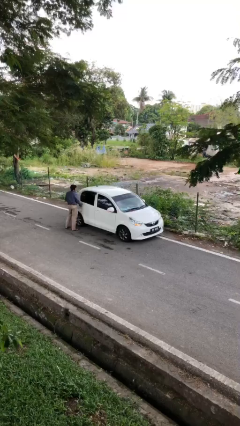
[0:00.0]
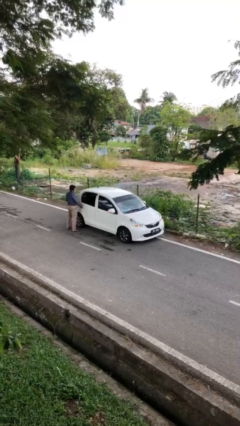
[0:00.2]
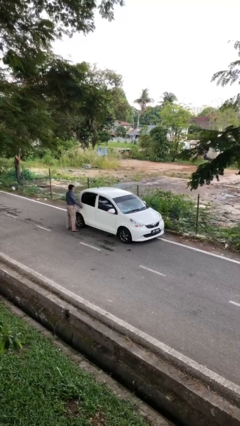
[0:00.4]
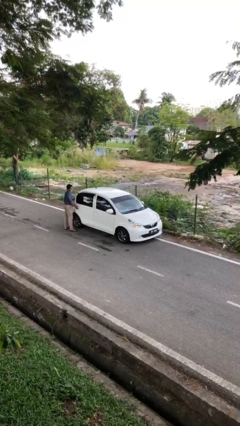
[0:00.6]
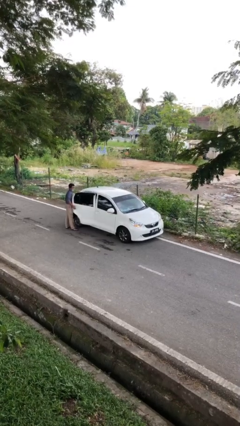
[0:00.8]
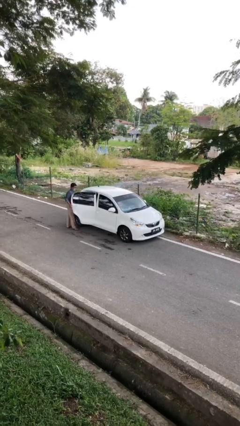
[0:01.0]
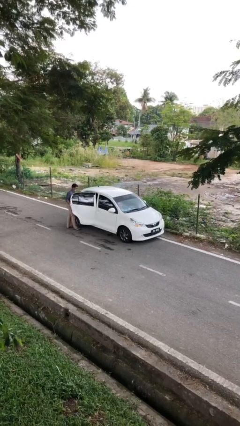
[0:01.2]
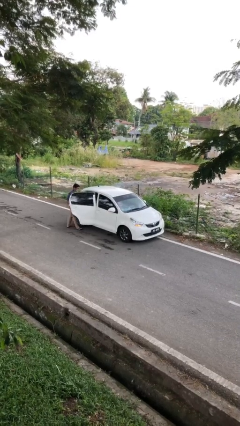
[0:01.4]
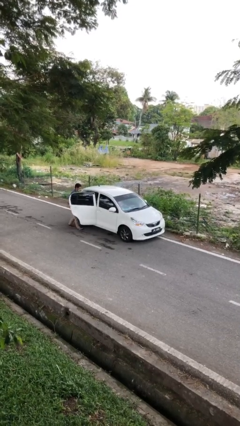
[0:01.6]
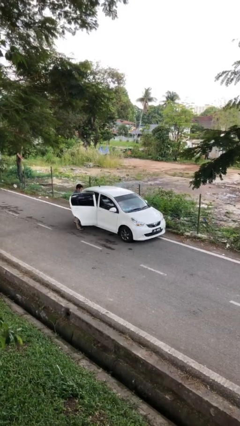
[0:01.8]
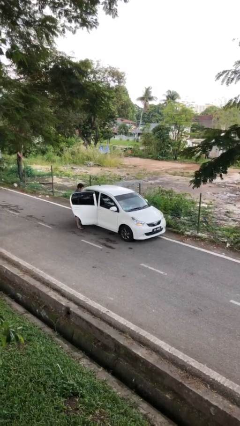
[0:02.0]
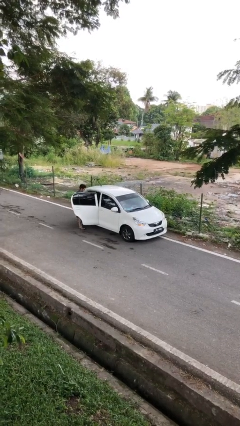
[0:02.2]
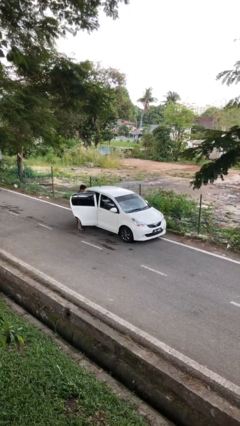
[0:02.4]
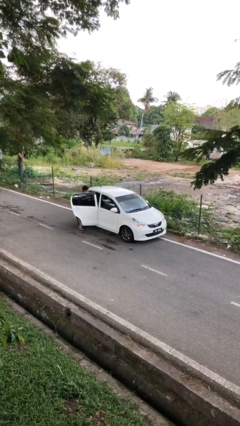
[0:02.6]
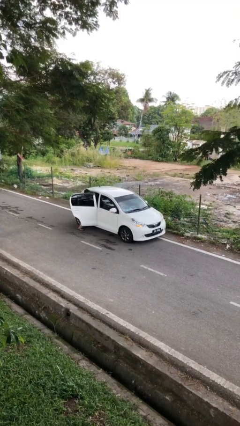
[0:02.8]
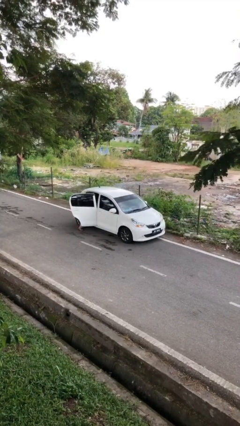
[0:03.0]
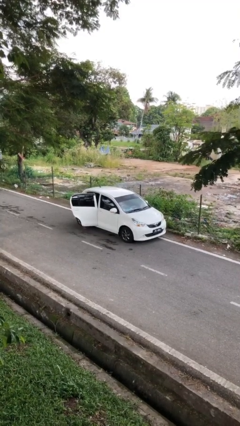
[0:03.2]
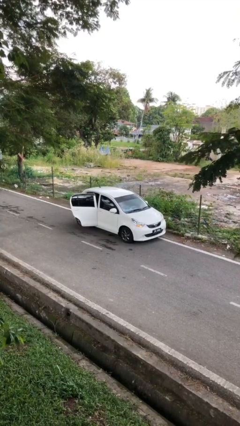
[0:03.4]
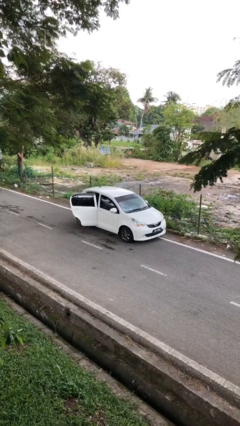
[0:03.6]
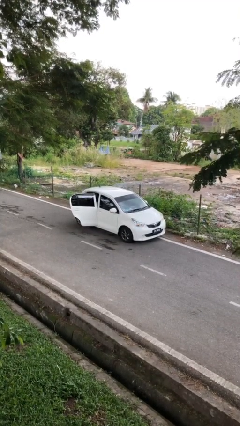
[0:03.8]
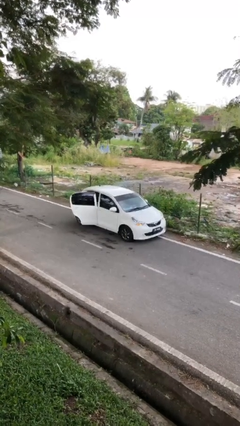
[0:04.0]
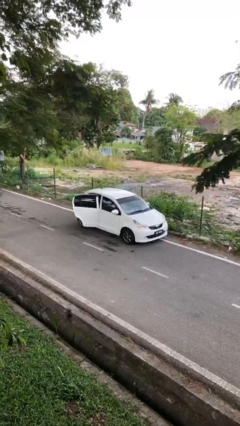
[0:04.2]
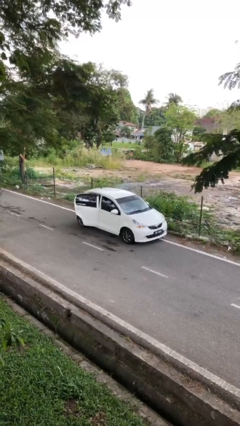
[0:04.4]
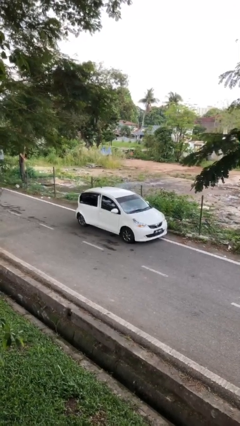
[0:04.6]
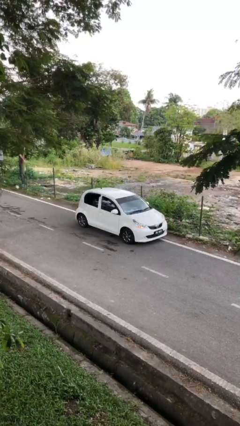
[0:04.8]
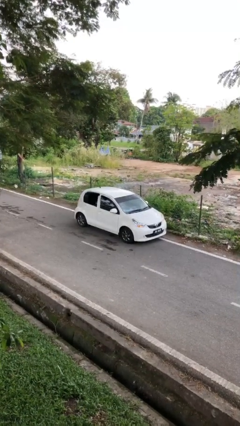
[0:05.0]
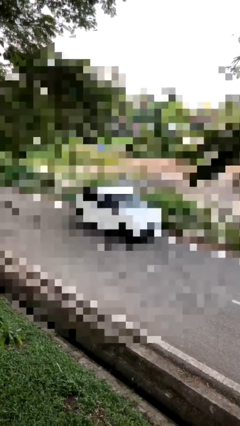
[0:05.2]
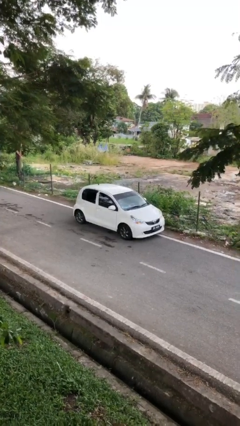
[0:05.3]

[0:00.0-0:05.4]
car picks up person

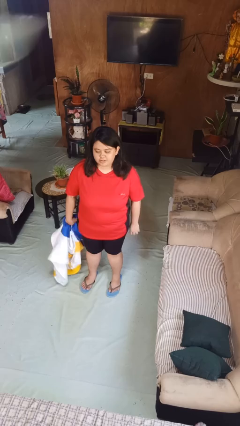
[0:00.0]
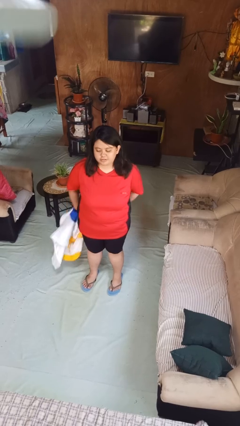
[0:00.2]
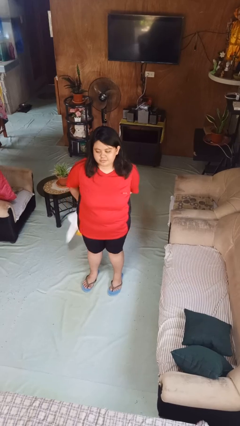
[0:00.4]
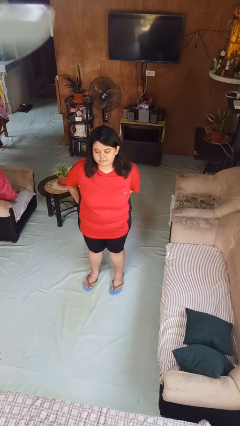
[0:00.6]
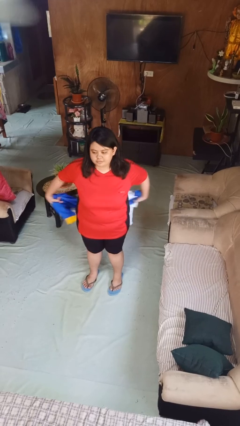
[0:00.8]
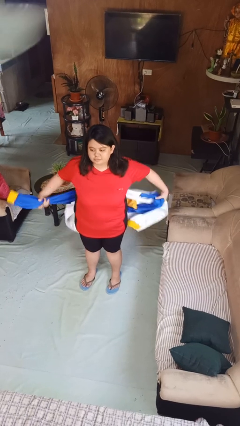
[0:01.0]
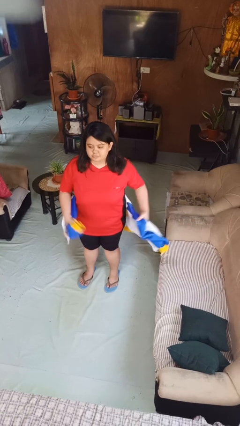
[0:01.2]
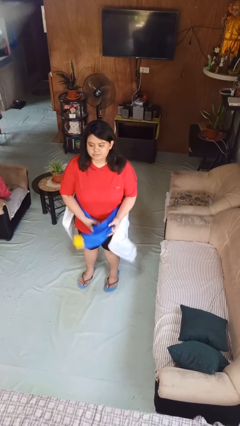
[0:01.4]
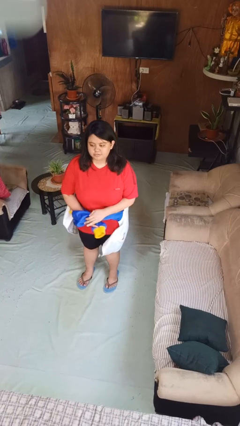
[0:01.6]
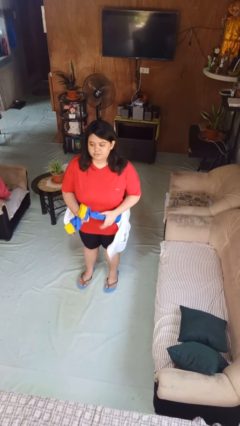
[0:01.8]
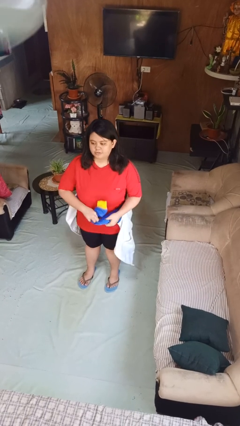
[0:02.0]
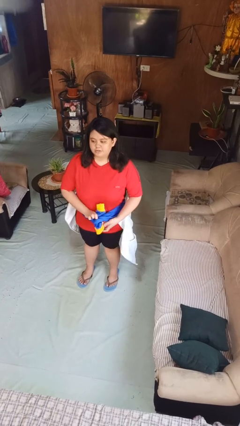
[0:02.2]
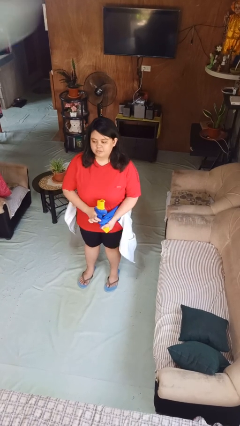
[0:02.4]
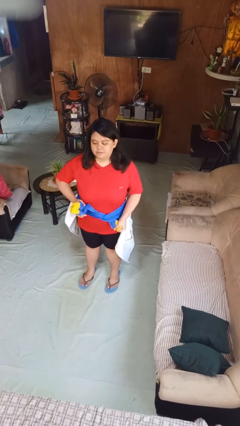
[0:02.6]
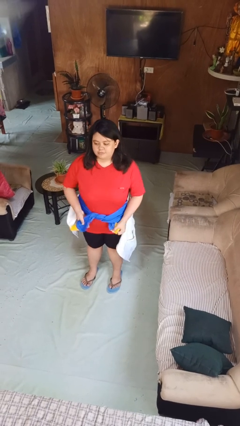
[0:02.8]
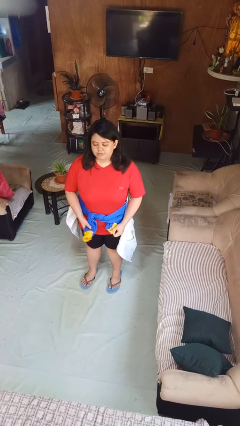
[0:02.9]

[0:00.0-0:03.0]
person ties jacket around waist

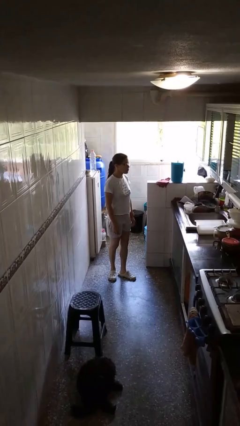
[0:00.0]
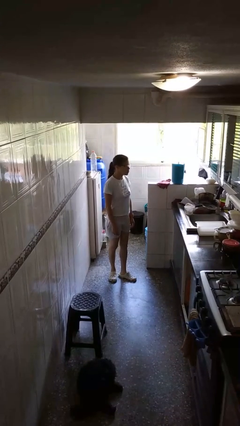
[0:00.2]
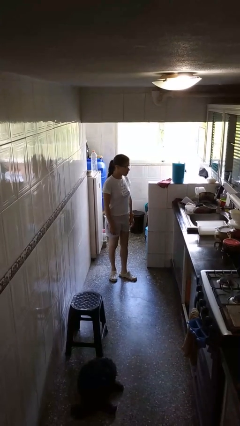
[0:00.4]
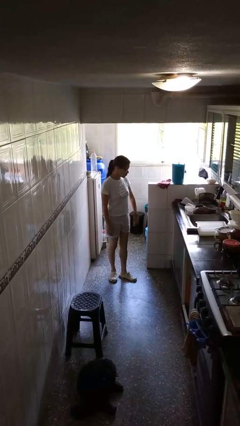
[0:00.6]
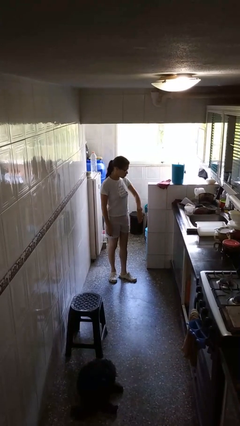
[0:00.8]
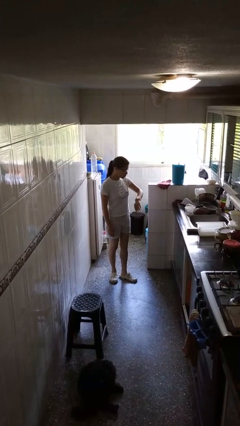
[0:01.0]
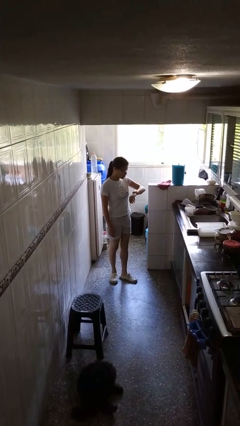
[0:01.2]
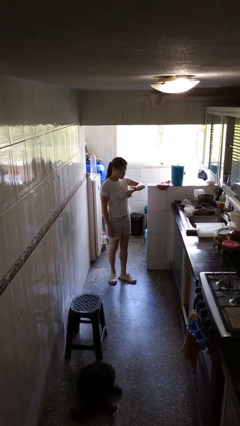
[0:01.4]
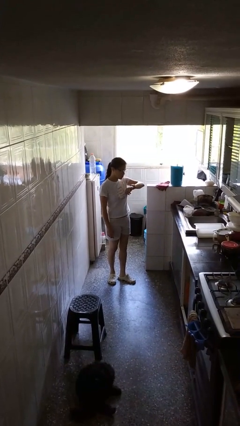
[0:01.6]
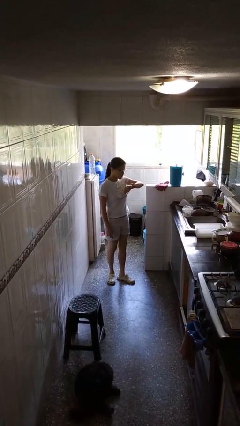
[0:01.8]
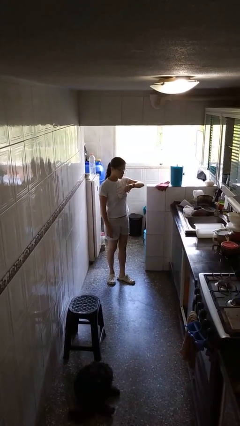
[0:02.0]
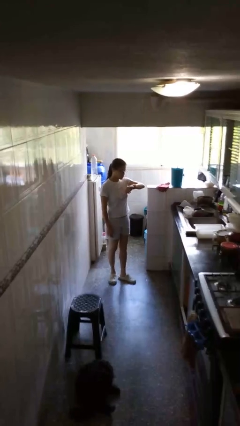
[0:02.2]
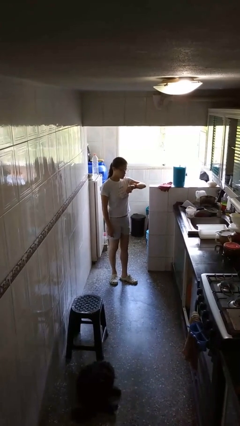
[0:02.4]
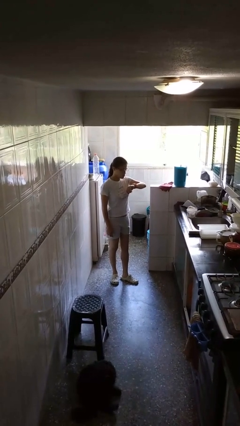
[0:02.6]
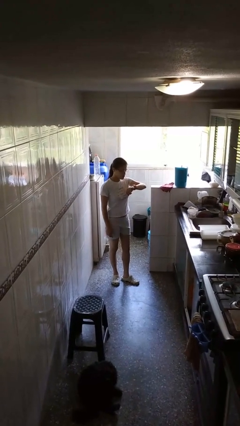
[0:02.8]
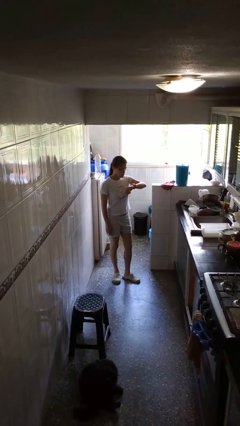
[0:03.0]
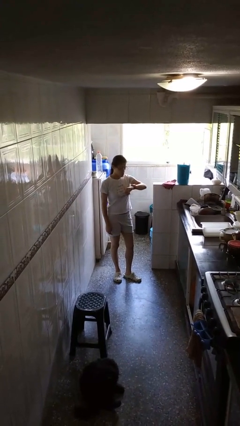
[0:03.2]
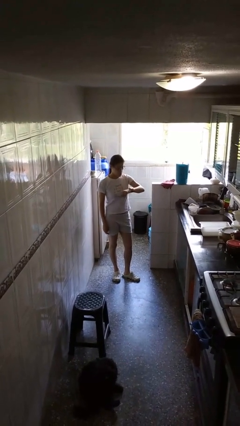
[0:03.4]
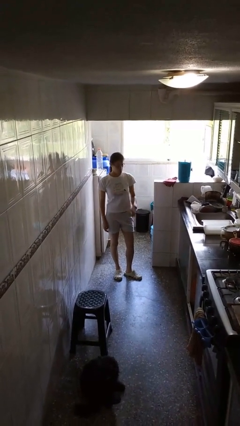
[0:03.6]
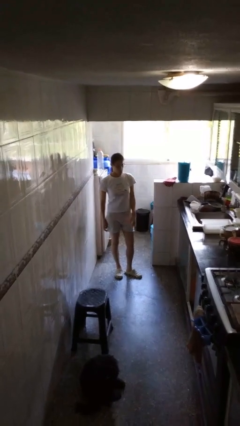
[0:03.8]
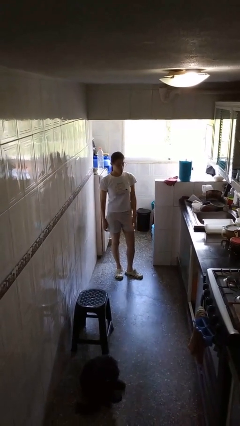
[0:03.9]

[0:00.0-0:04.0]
person looks at wristwatch

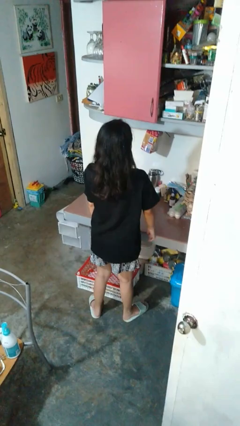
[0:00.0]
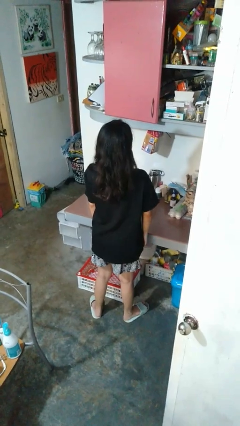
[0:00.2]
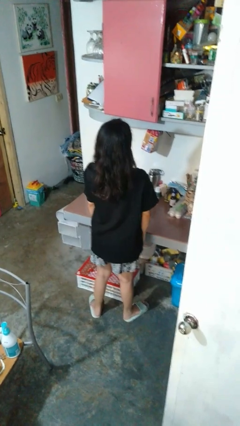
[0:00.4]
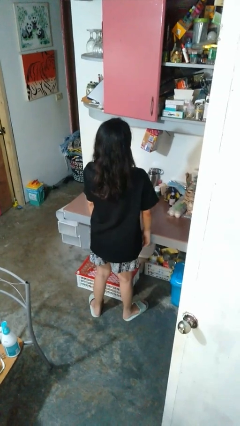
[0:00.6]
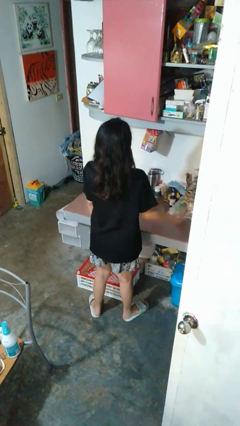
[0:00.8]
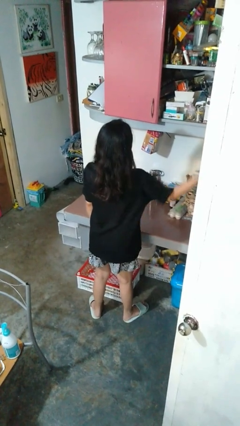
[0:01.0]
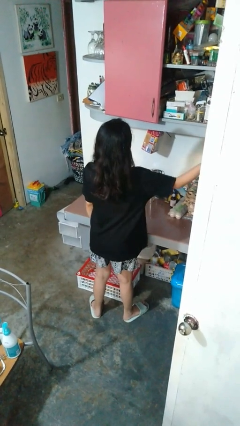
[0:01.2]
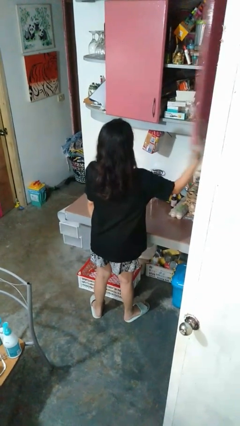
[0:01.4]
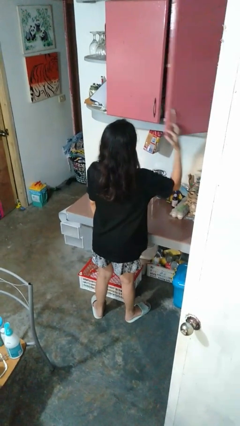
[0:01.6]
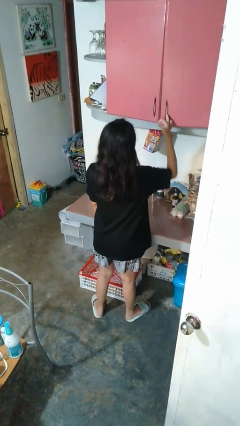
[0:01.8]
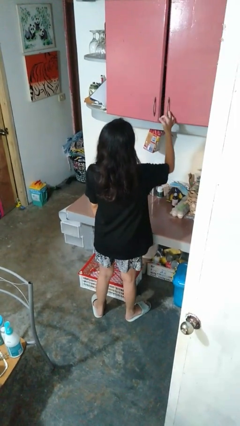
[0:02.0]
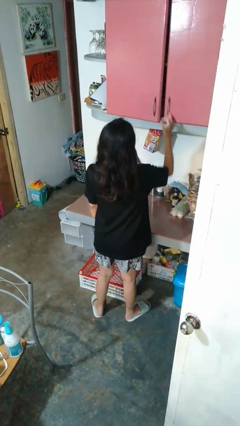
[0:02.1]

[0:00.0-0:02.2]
person closes cabinet

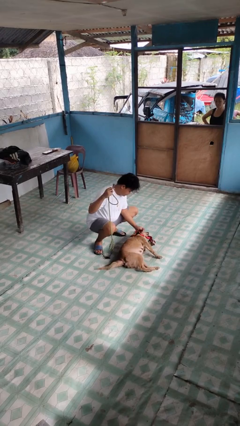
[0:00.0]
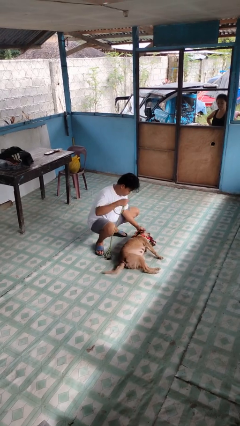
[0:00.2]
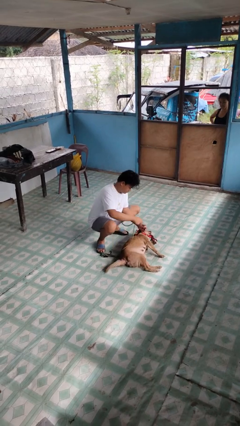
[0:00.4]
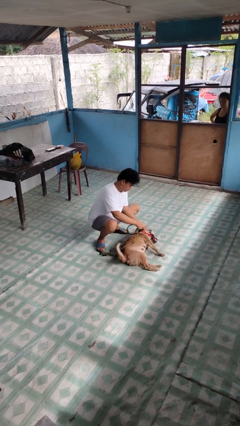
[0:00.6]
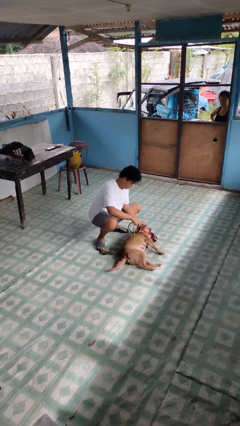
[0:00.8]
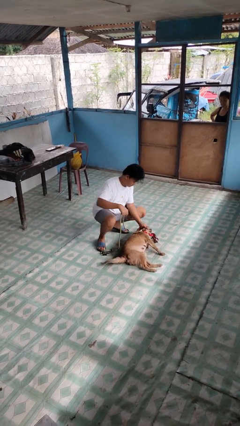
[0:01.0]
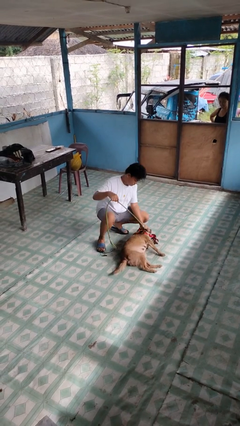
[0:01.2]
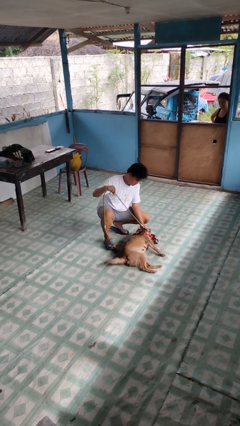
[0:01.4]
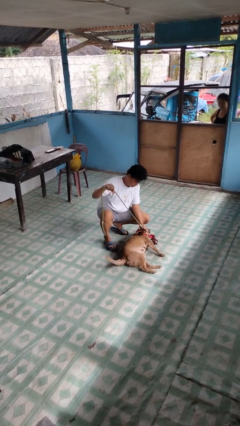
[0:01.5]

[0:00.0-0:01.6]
person attaches leash to dog

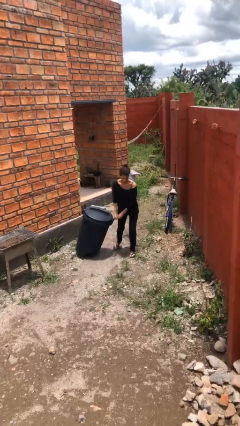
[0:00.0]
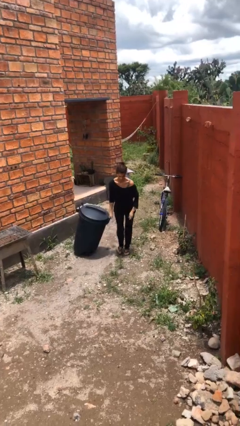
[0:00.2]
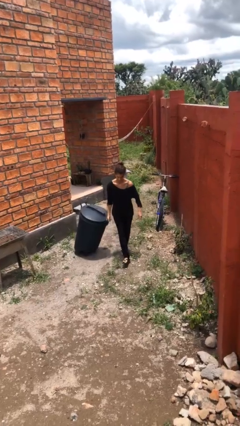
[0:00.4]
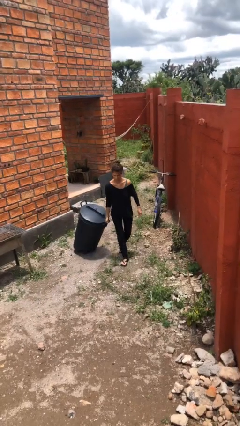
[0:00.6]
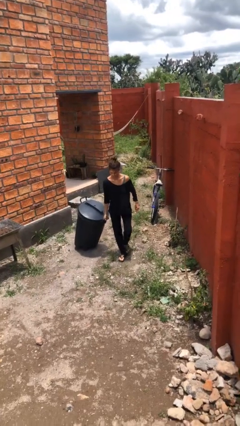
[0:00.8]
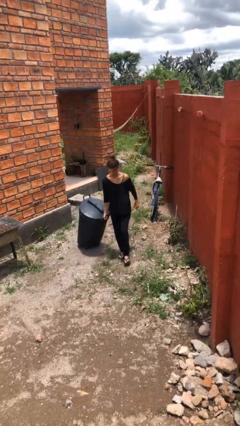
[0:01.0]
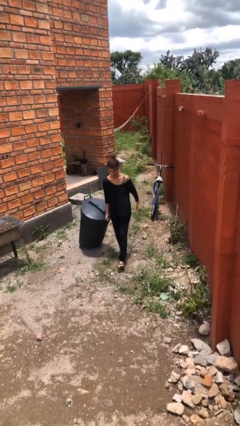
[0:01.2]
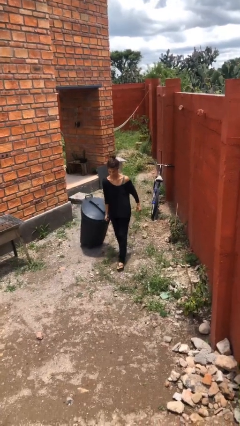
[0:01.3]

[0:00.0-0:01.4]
person pulls wheeled trashcan
